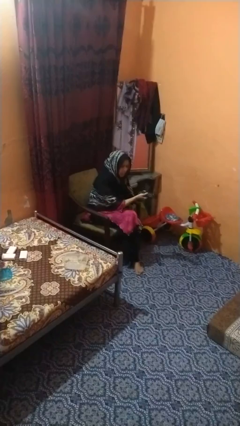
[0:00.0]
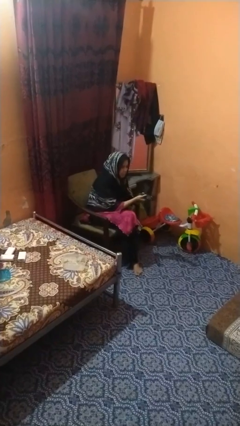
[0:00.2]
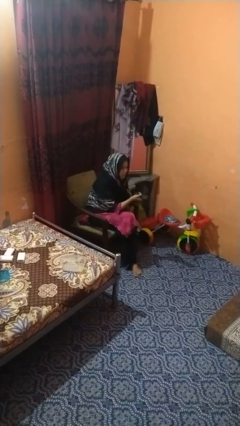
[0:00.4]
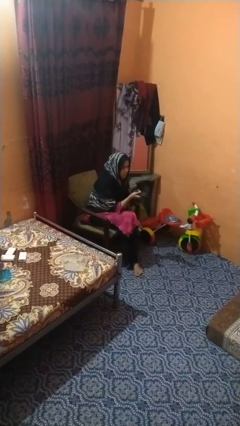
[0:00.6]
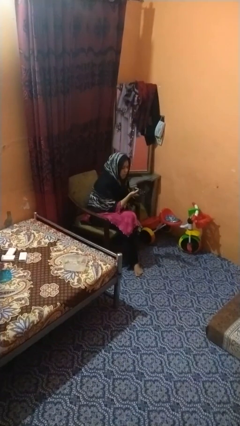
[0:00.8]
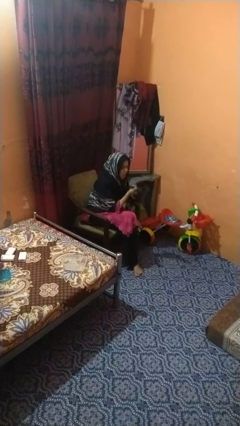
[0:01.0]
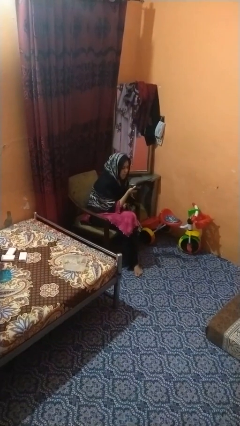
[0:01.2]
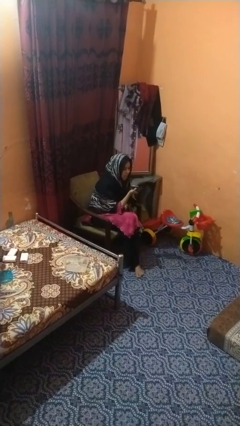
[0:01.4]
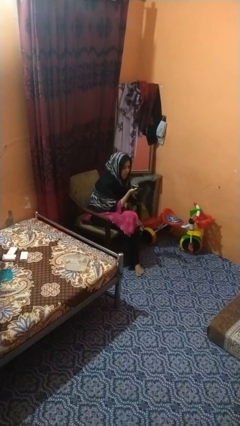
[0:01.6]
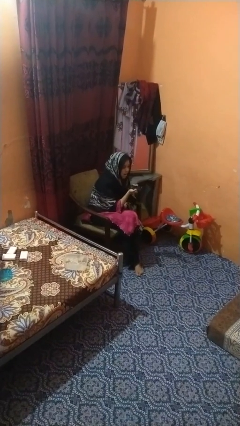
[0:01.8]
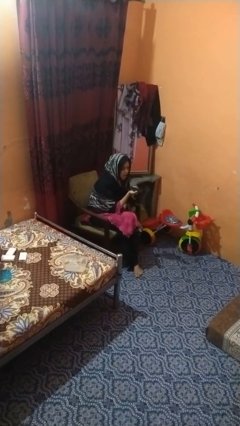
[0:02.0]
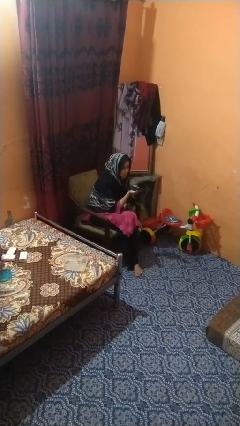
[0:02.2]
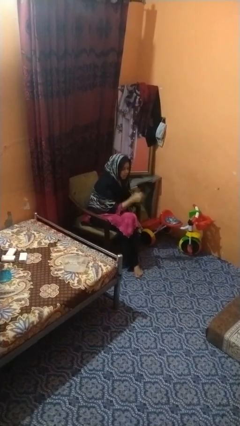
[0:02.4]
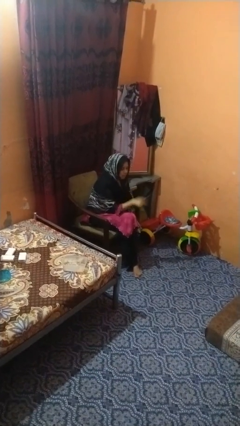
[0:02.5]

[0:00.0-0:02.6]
person uses television remote

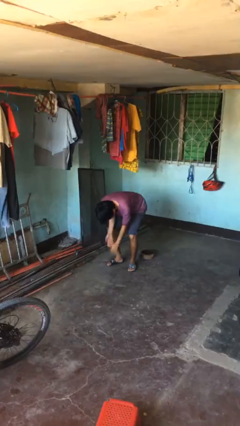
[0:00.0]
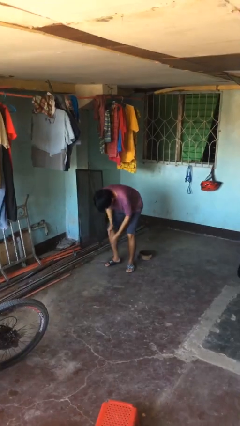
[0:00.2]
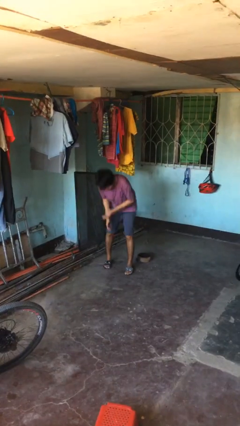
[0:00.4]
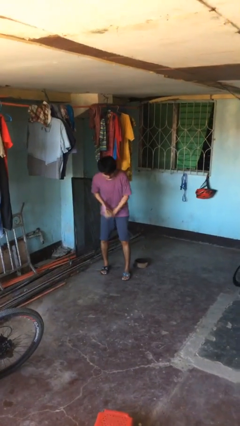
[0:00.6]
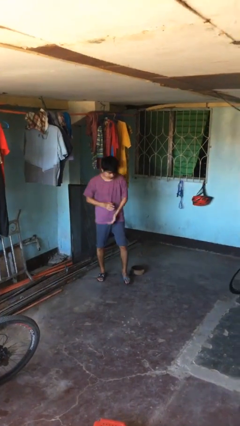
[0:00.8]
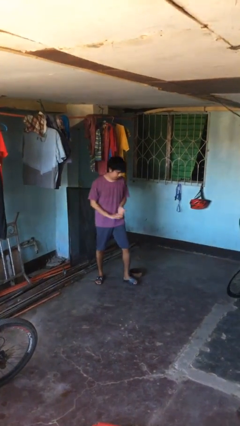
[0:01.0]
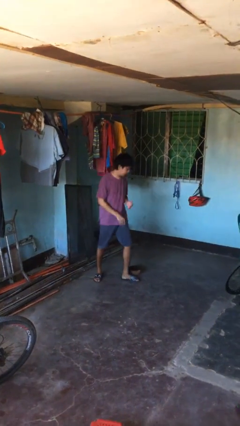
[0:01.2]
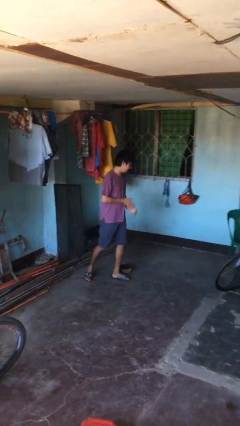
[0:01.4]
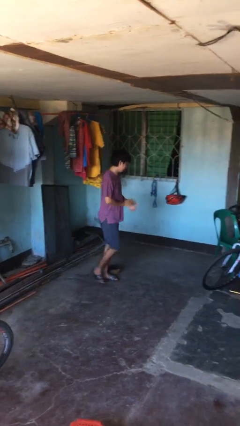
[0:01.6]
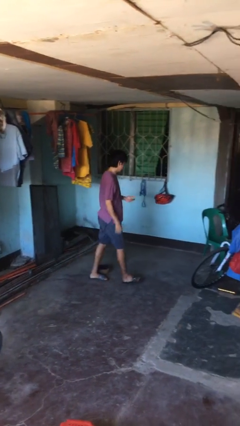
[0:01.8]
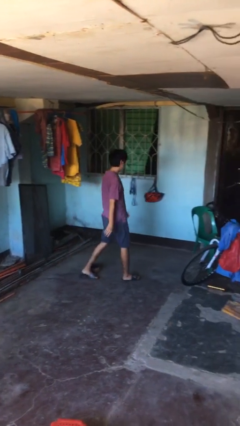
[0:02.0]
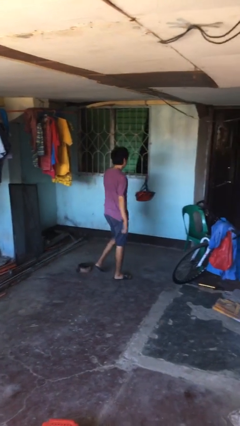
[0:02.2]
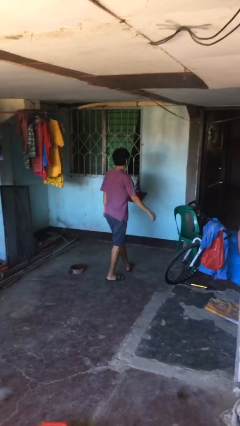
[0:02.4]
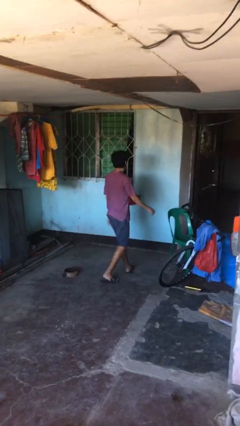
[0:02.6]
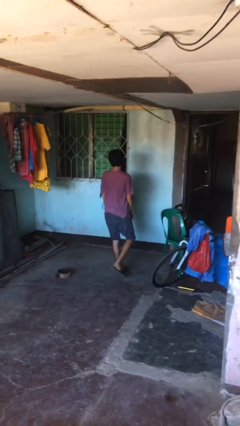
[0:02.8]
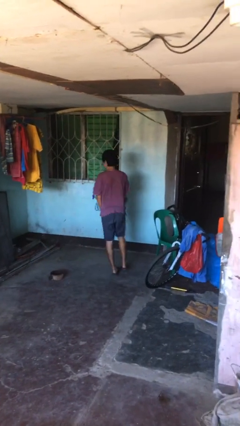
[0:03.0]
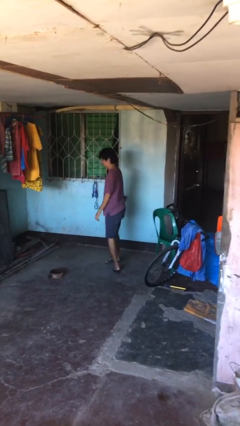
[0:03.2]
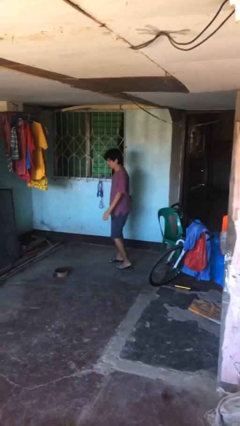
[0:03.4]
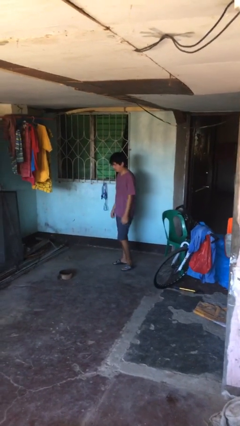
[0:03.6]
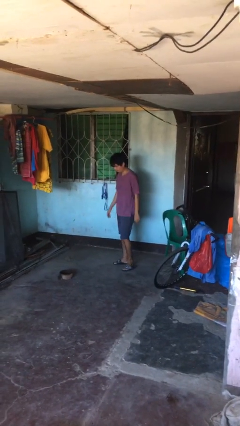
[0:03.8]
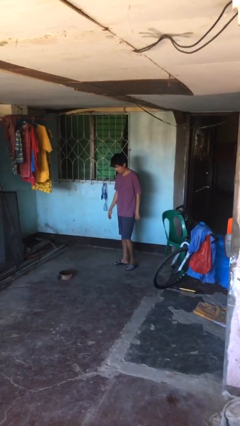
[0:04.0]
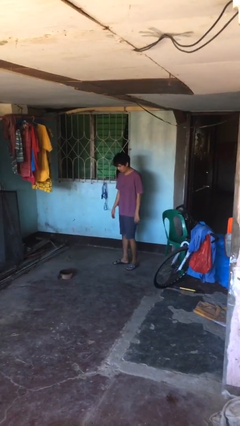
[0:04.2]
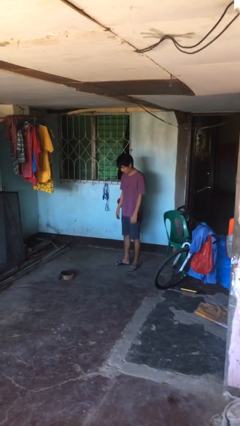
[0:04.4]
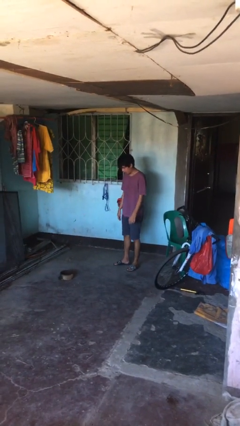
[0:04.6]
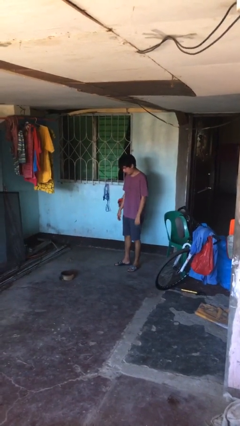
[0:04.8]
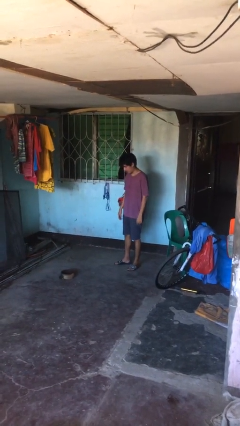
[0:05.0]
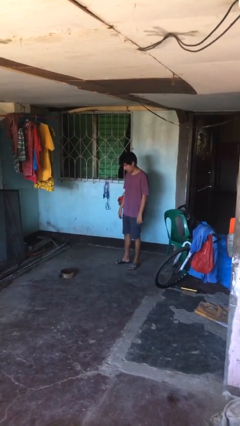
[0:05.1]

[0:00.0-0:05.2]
person stands up from floor

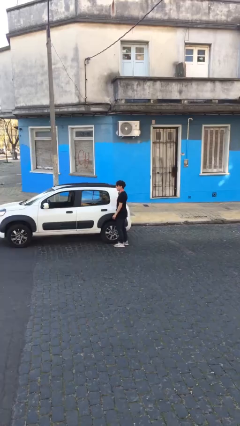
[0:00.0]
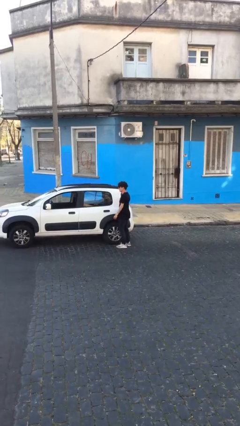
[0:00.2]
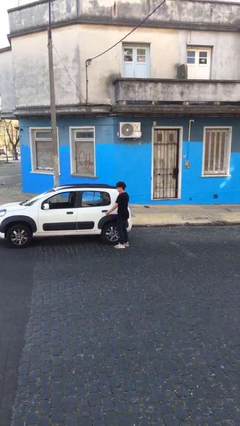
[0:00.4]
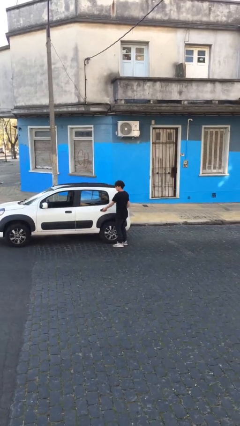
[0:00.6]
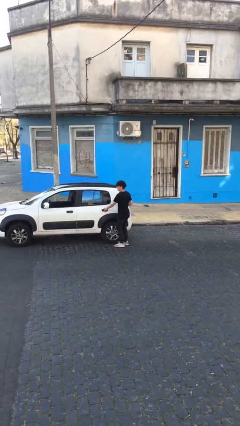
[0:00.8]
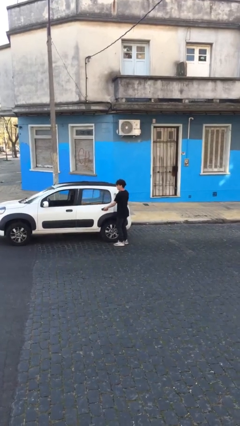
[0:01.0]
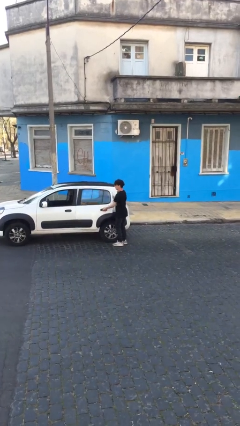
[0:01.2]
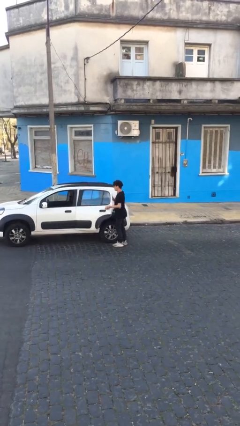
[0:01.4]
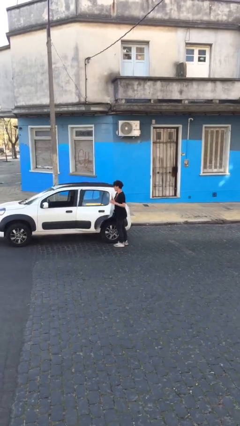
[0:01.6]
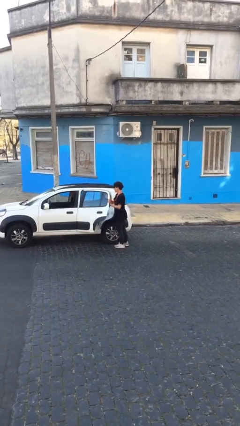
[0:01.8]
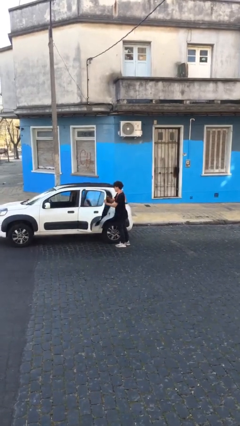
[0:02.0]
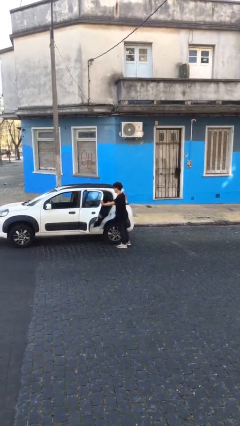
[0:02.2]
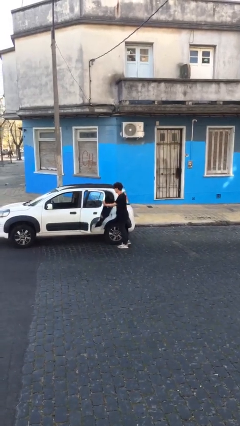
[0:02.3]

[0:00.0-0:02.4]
person opens car door

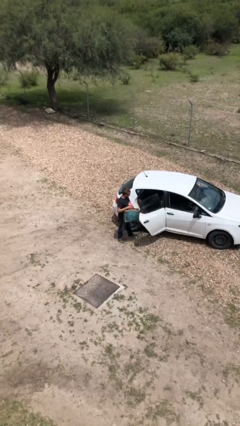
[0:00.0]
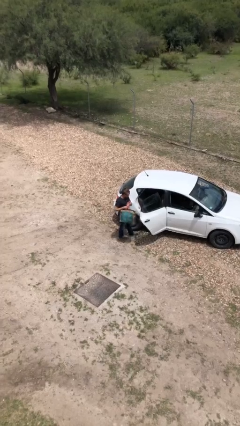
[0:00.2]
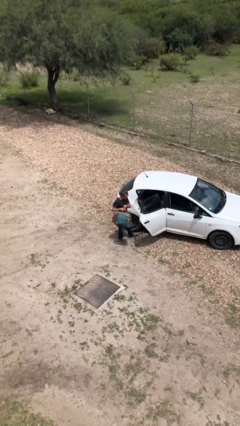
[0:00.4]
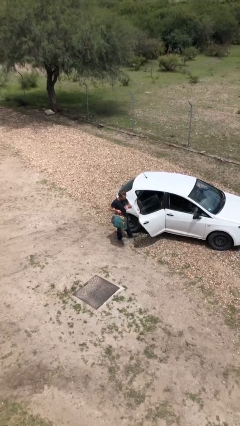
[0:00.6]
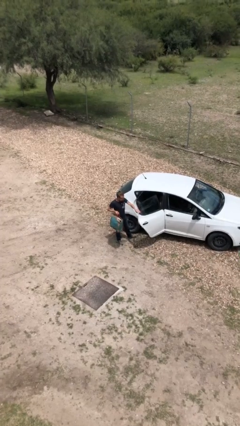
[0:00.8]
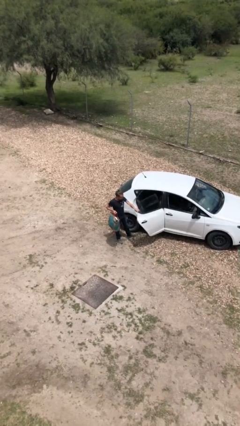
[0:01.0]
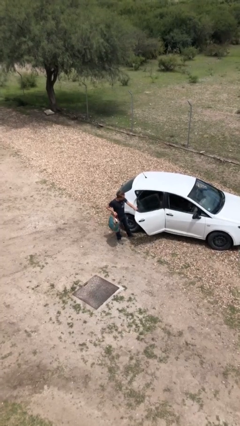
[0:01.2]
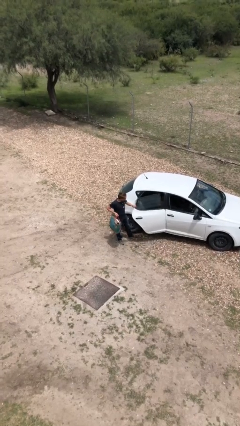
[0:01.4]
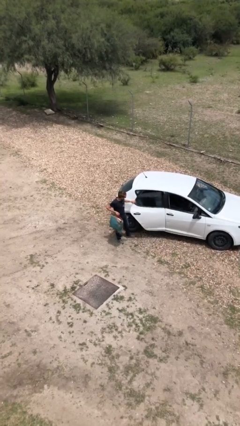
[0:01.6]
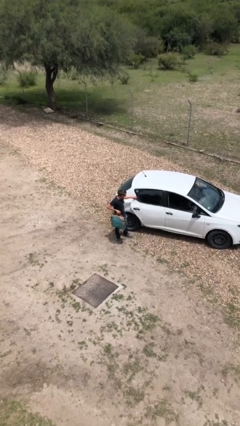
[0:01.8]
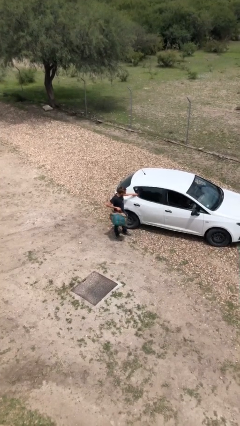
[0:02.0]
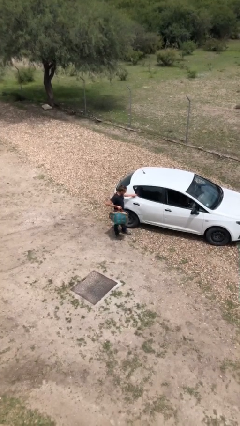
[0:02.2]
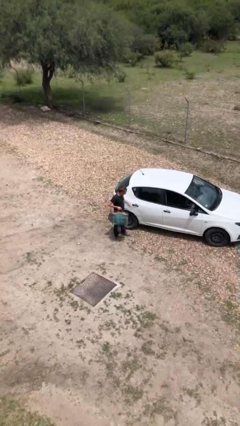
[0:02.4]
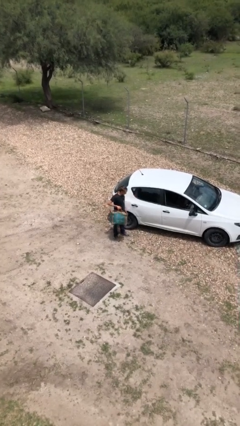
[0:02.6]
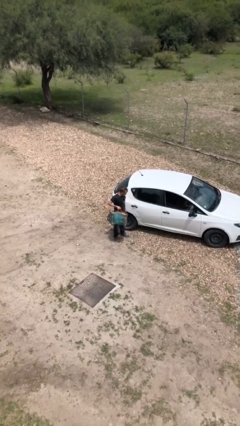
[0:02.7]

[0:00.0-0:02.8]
person closes car door

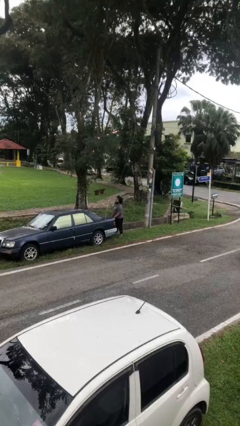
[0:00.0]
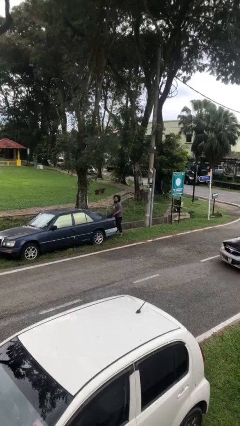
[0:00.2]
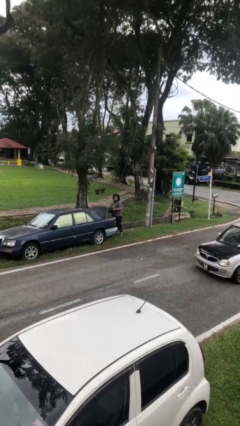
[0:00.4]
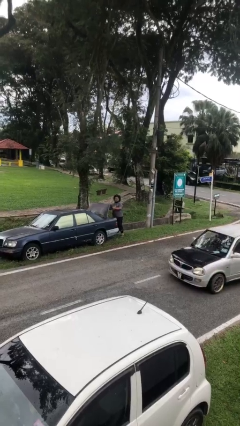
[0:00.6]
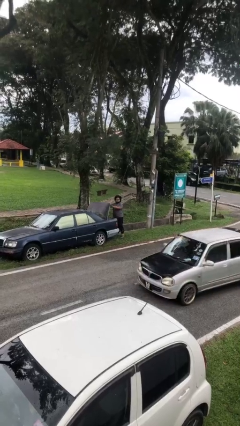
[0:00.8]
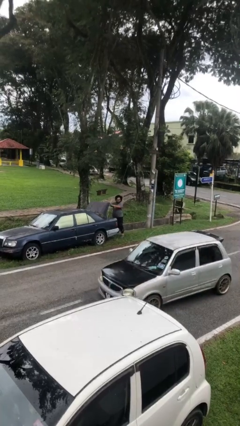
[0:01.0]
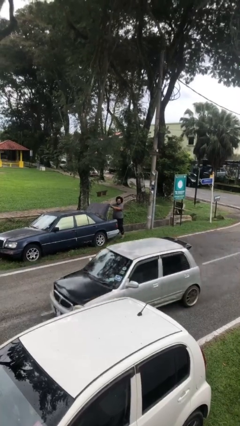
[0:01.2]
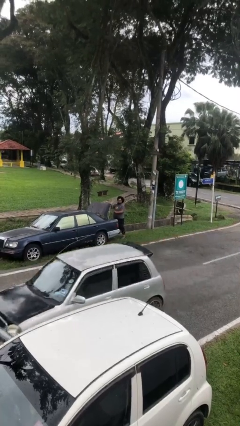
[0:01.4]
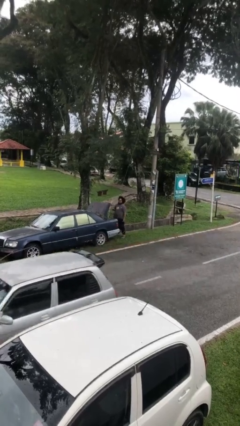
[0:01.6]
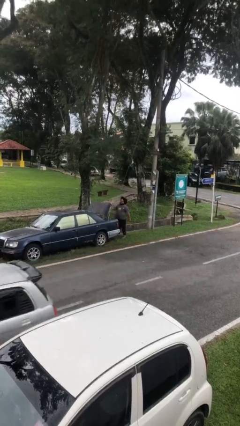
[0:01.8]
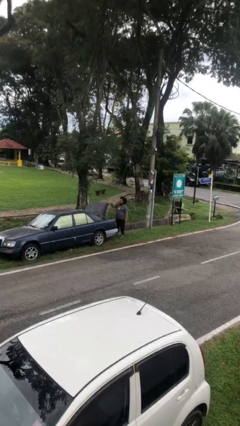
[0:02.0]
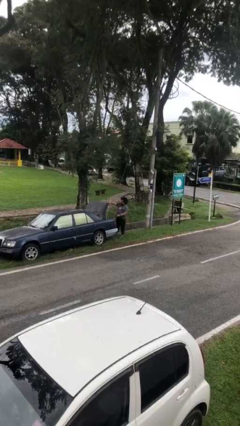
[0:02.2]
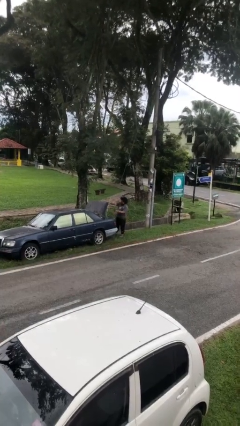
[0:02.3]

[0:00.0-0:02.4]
person opens car trunk

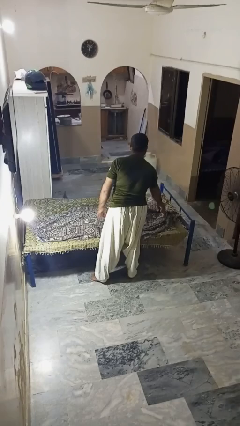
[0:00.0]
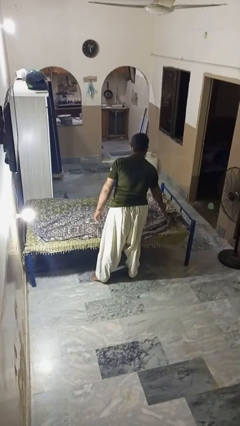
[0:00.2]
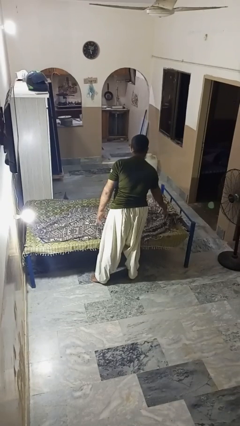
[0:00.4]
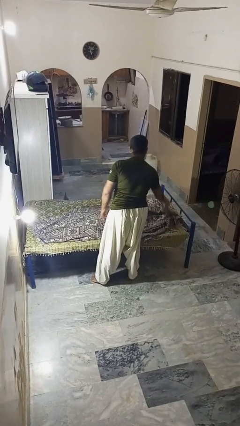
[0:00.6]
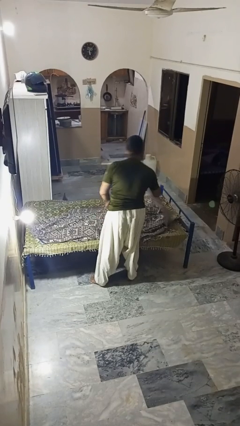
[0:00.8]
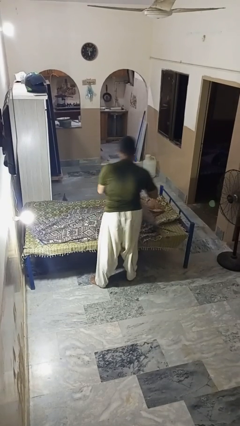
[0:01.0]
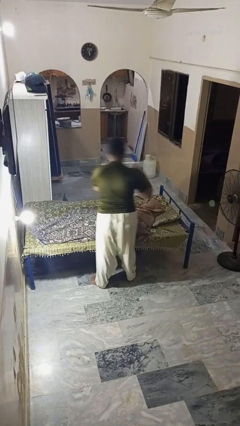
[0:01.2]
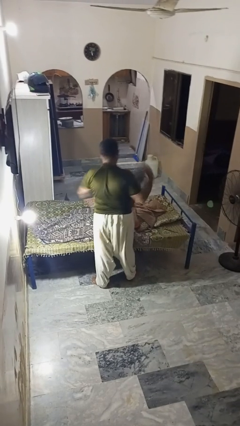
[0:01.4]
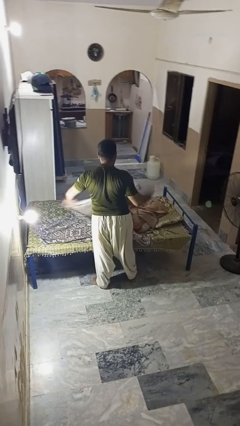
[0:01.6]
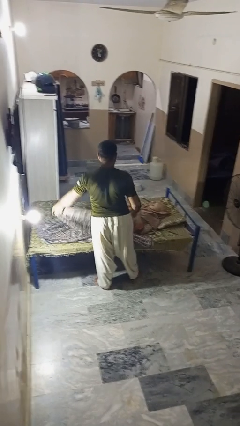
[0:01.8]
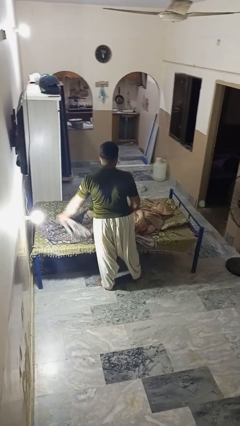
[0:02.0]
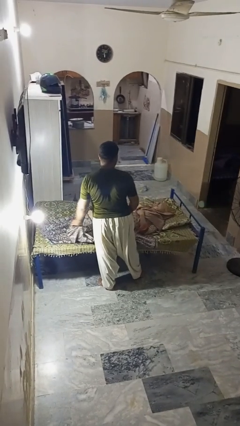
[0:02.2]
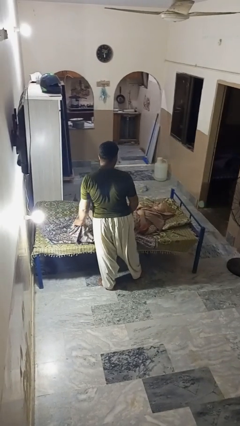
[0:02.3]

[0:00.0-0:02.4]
person uncovers friend with blanket
